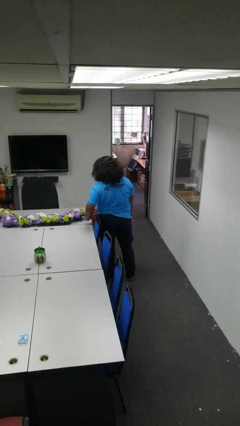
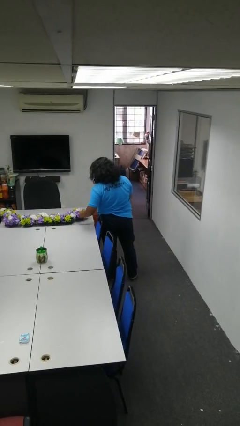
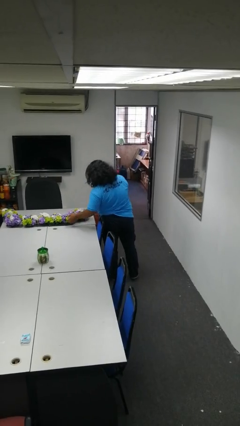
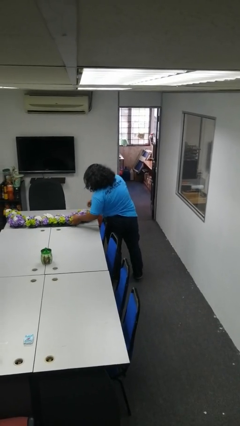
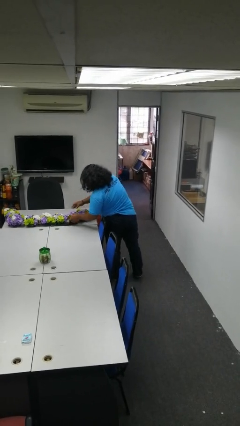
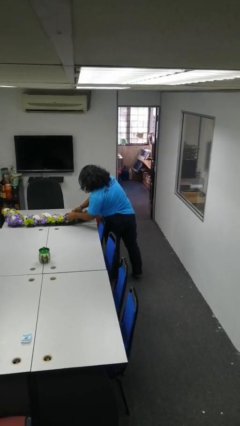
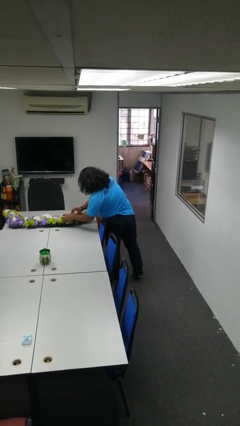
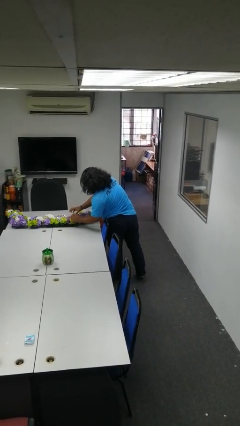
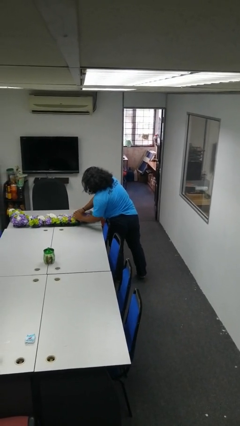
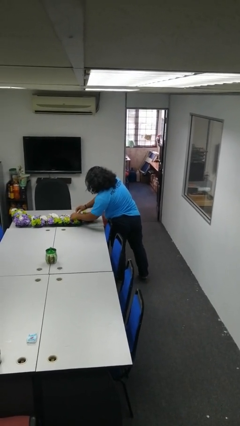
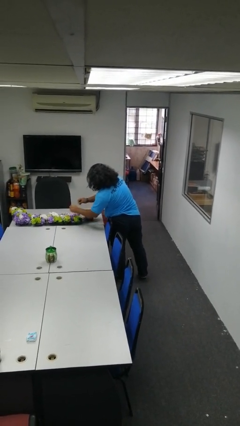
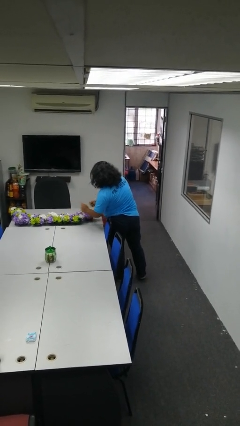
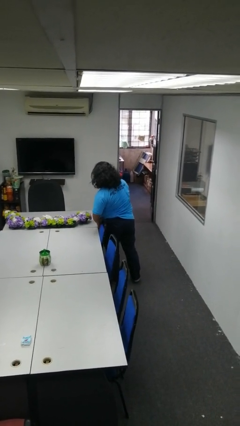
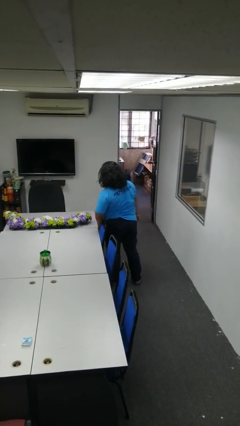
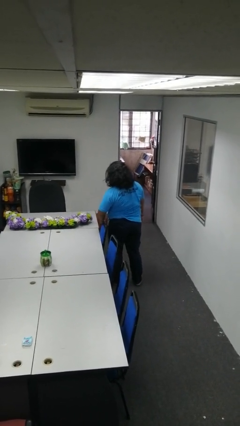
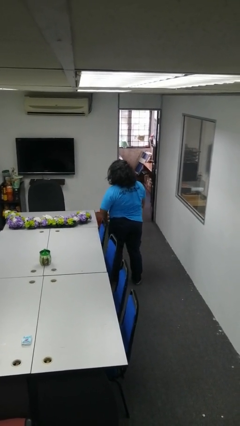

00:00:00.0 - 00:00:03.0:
person arranges flowers in vase

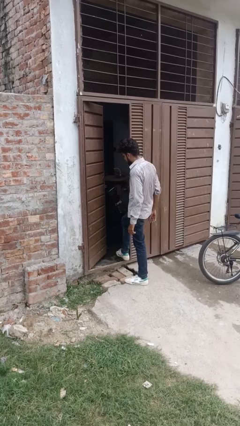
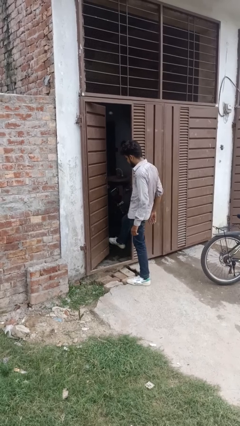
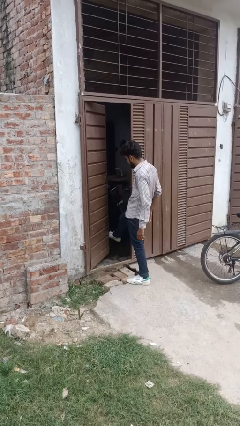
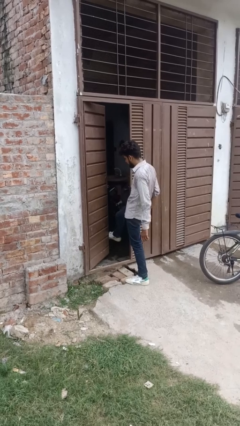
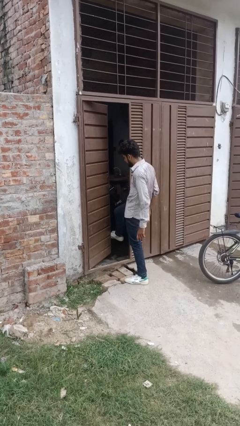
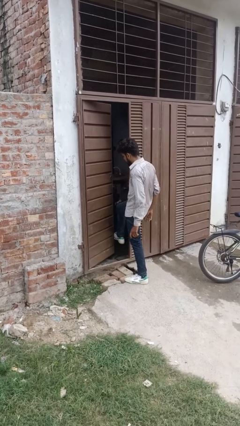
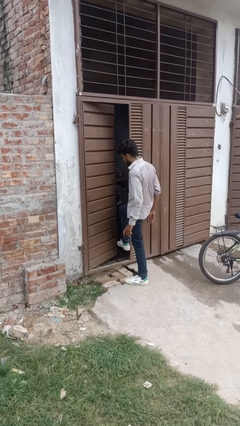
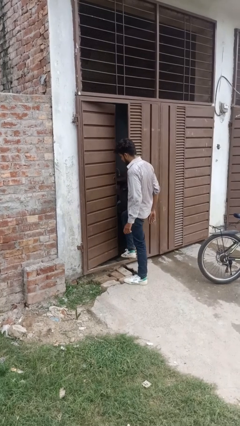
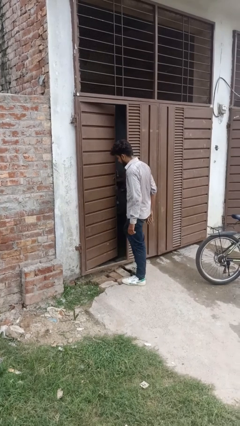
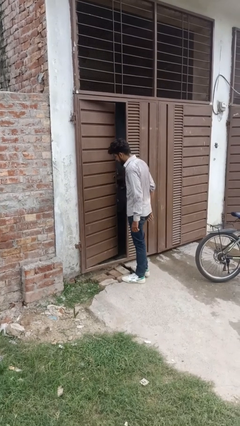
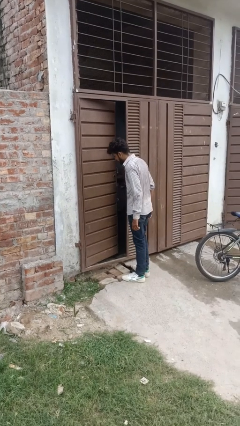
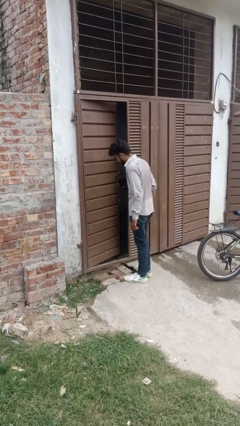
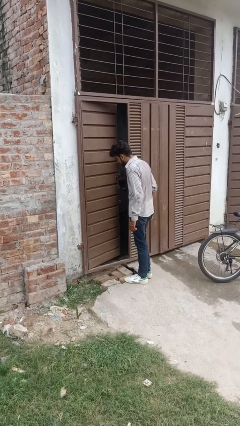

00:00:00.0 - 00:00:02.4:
person closes door with foot

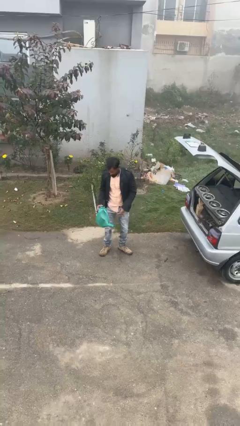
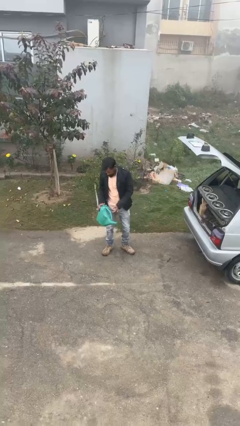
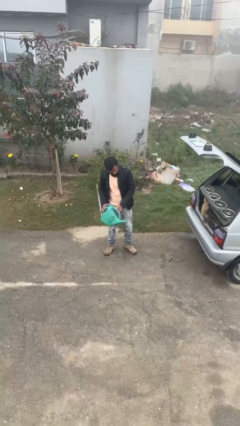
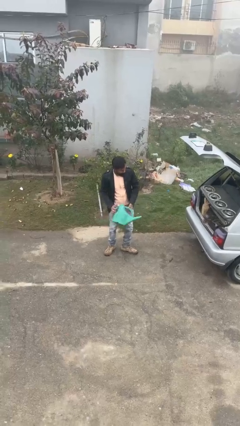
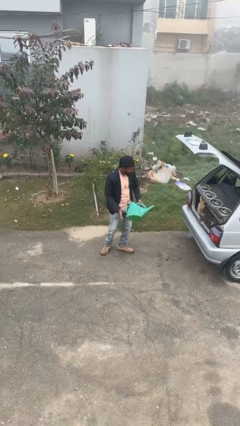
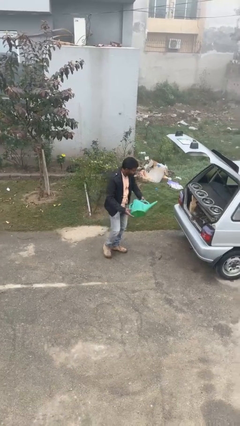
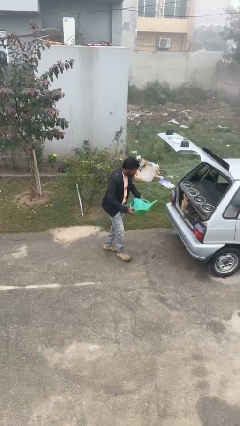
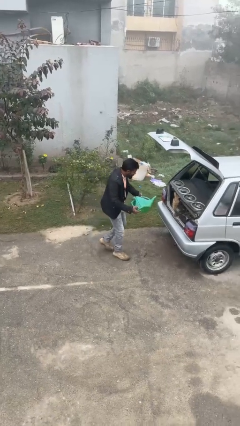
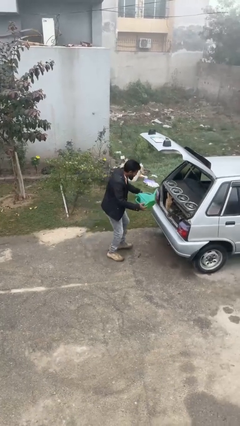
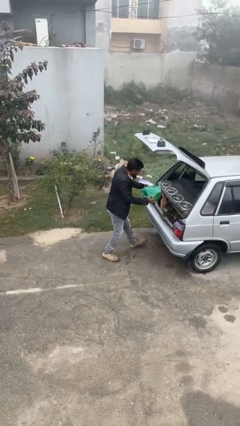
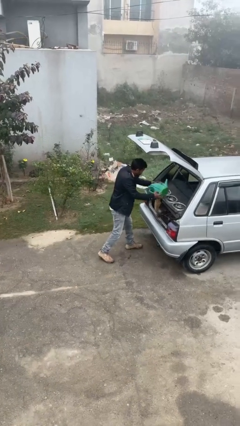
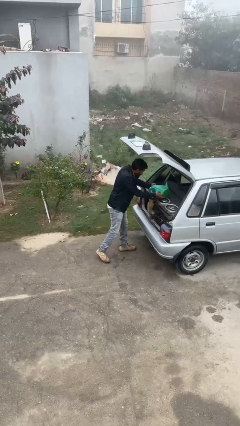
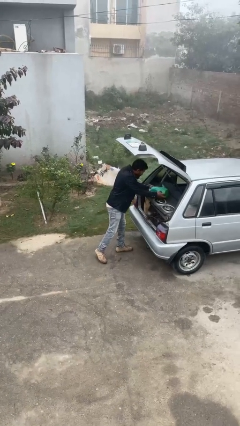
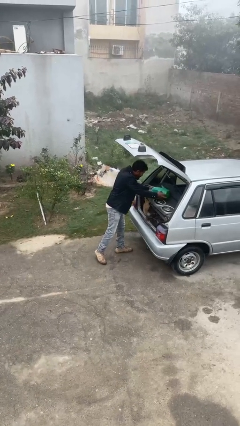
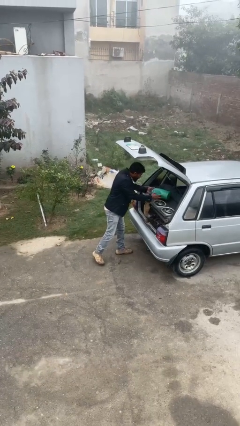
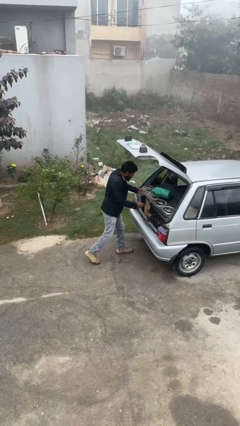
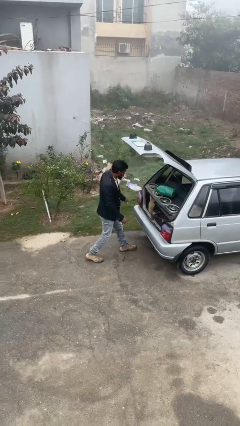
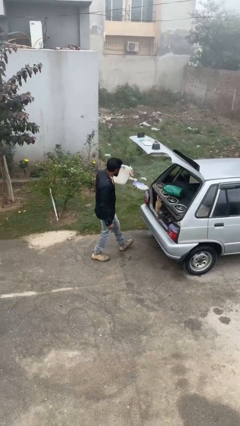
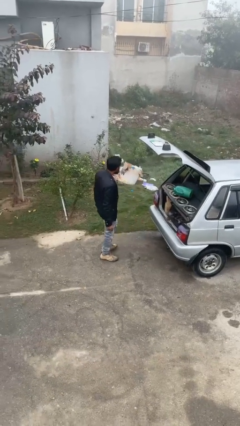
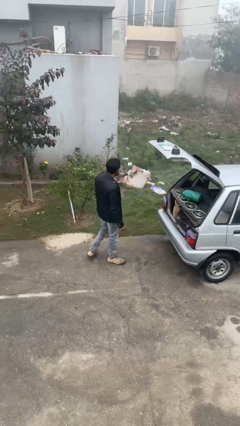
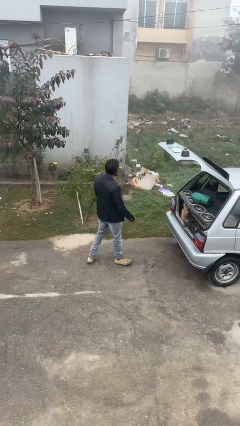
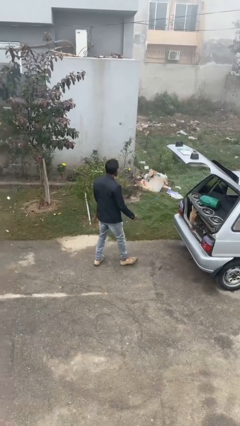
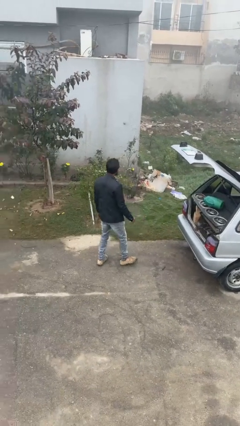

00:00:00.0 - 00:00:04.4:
person loads car

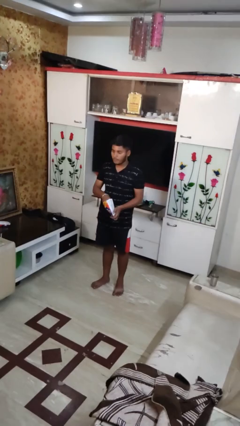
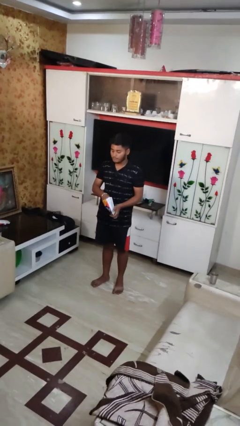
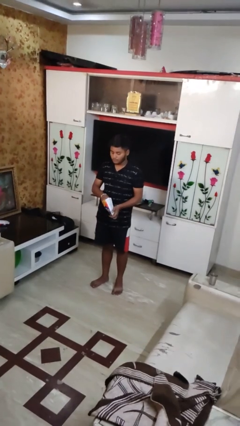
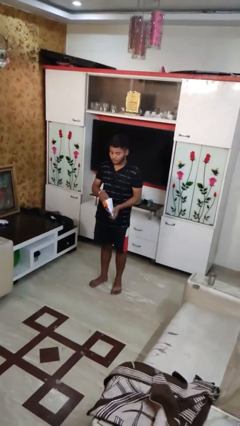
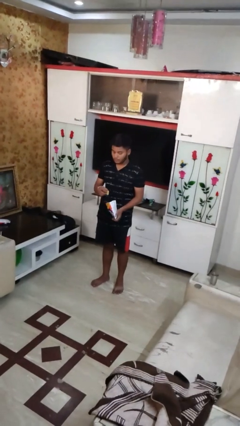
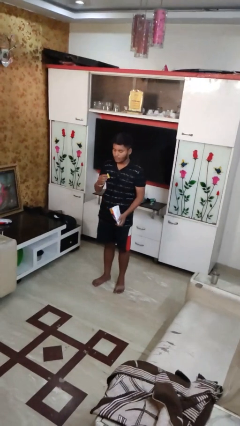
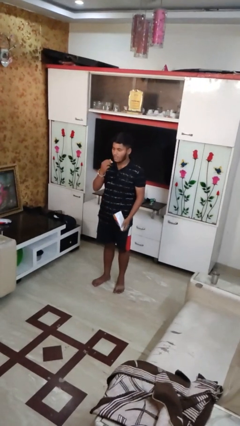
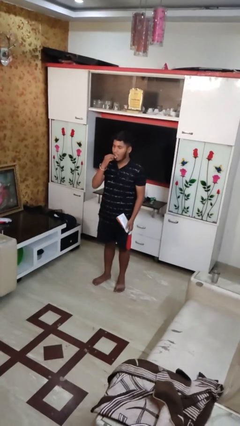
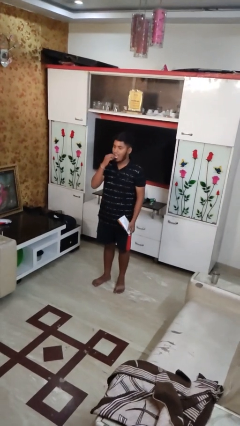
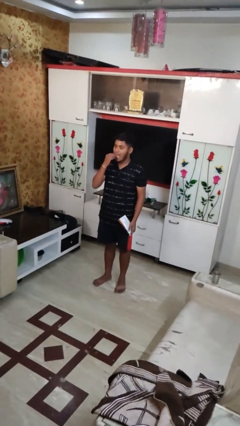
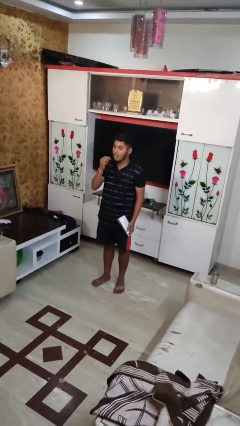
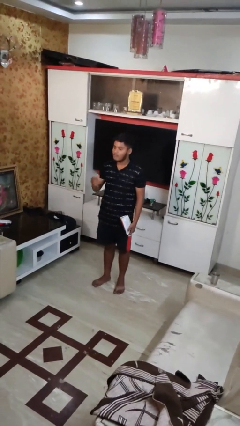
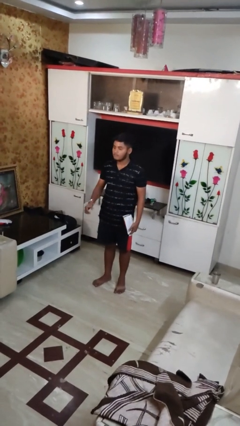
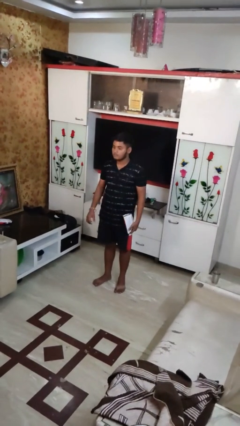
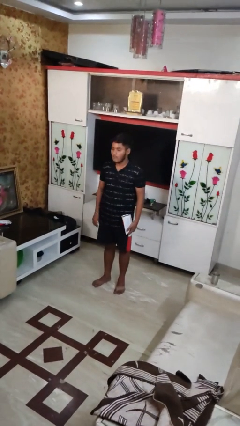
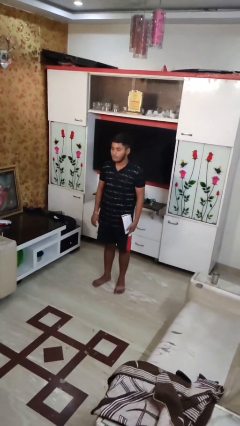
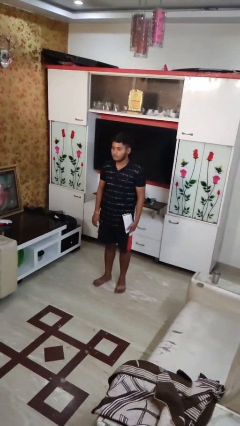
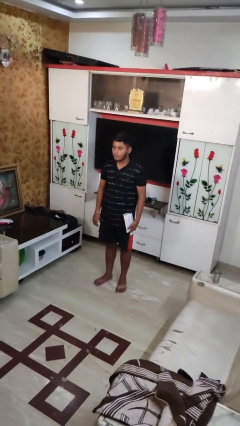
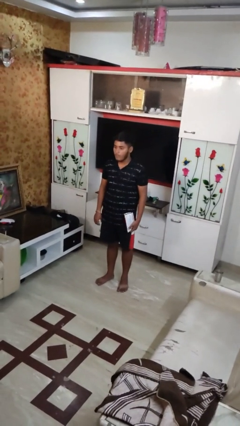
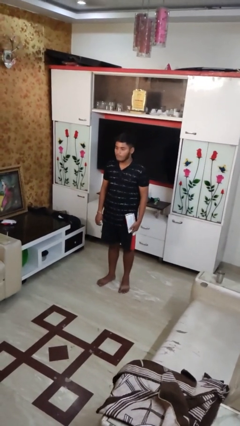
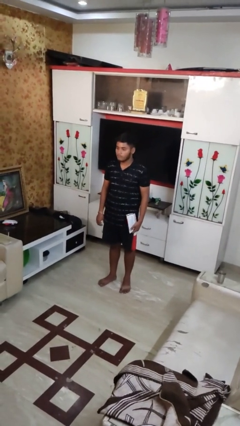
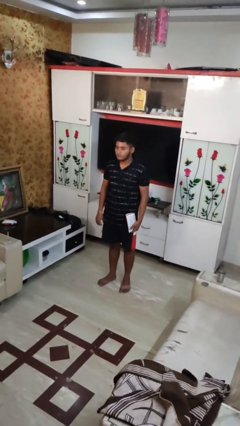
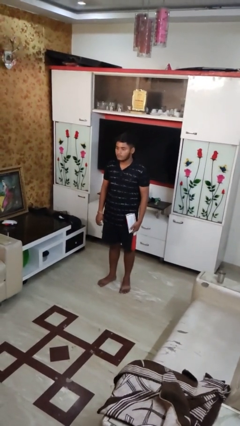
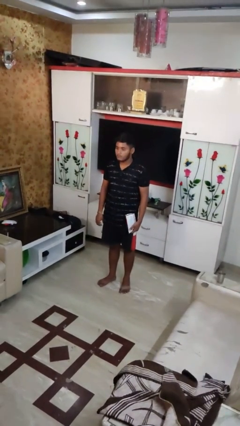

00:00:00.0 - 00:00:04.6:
person eats snack from bag

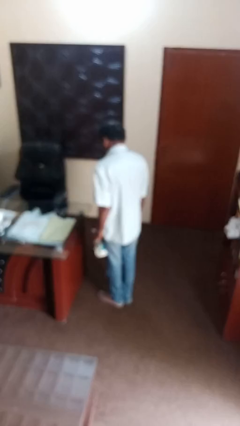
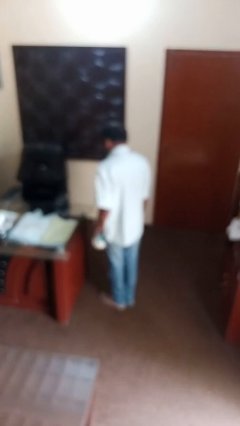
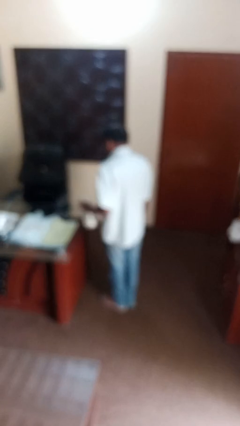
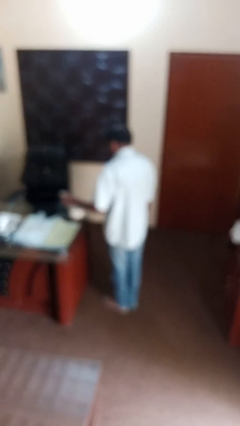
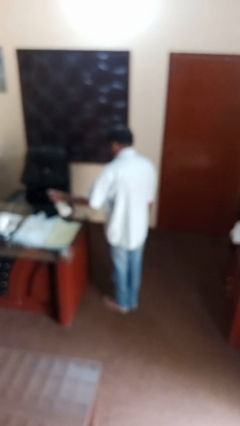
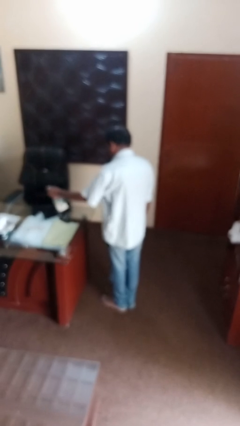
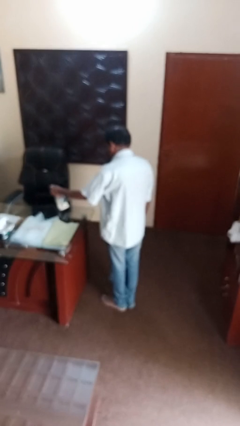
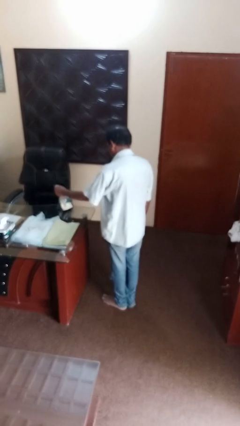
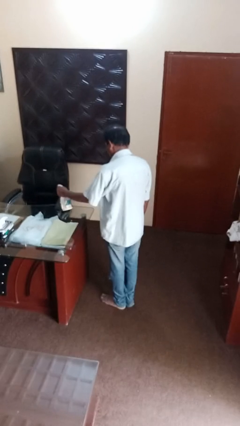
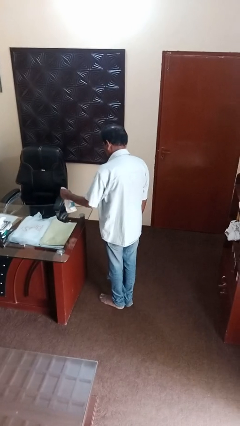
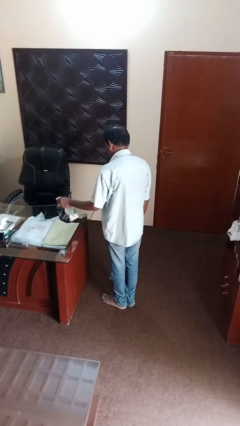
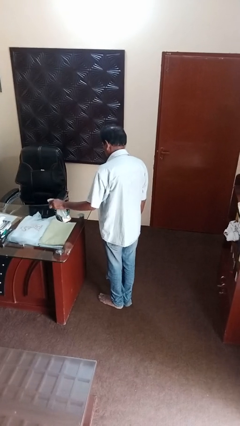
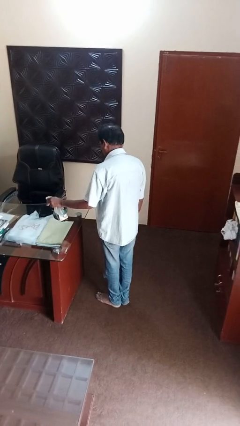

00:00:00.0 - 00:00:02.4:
person sprays from bottle

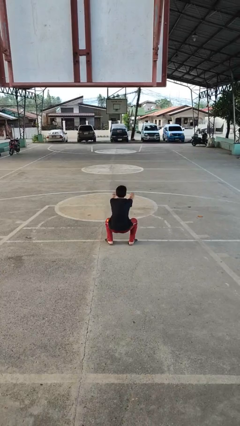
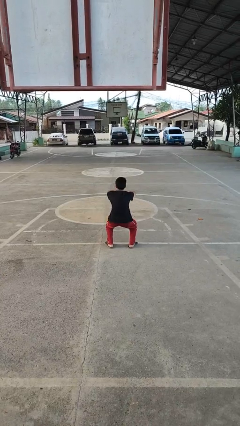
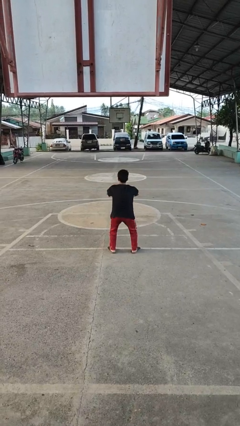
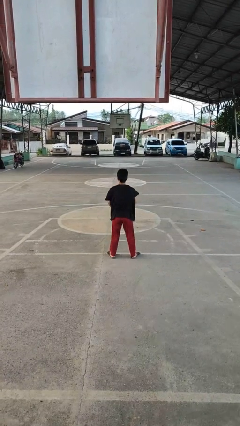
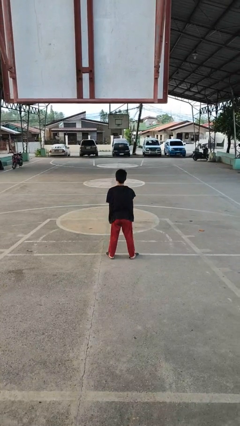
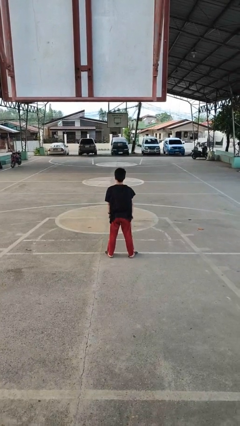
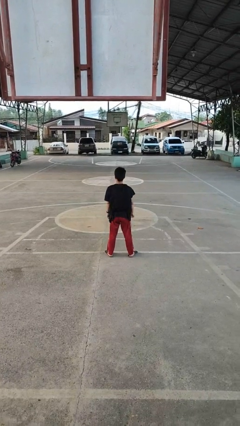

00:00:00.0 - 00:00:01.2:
person stands up
